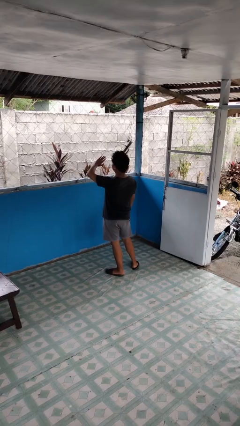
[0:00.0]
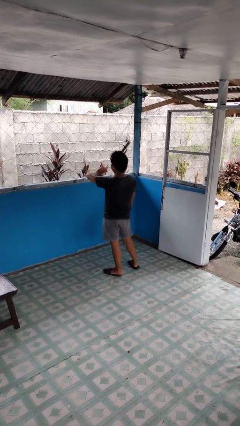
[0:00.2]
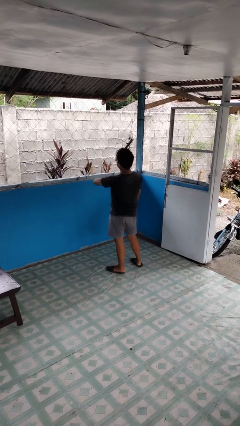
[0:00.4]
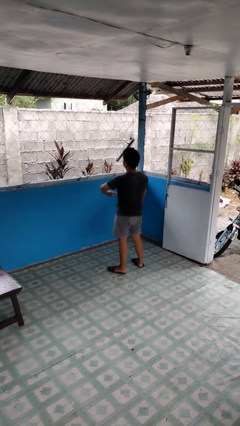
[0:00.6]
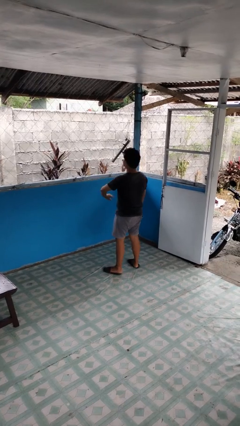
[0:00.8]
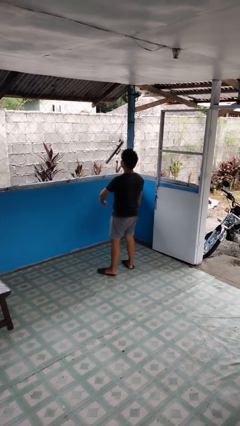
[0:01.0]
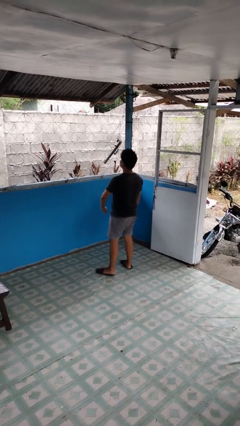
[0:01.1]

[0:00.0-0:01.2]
person gestures swipe down

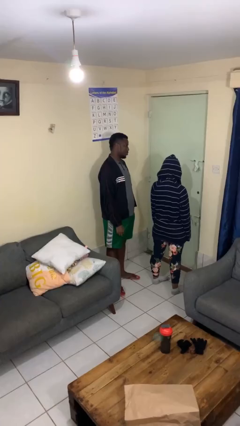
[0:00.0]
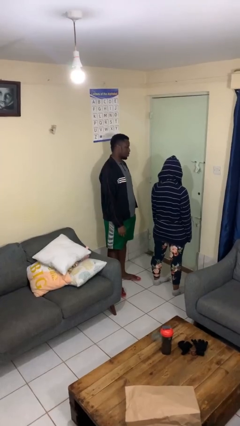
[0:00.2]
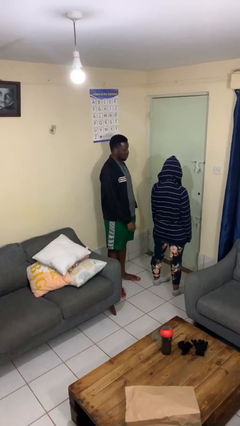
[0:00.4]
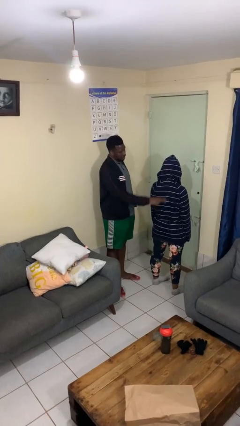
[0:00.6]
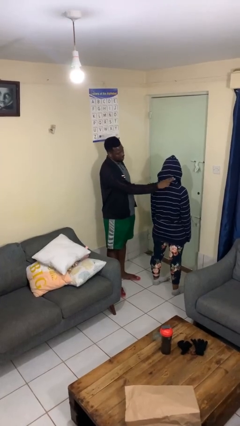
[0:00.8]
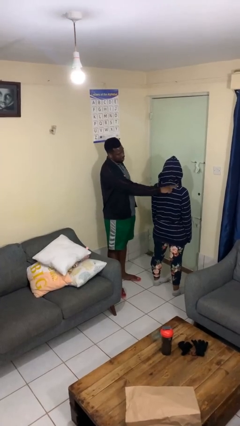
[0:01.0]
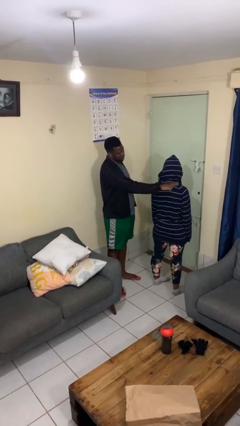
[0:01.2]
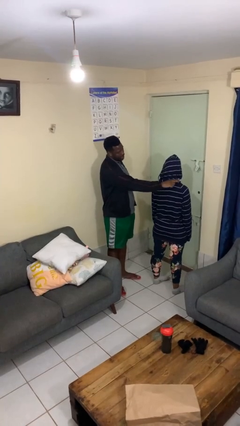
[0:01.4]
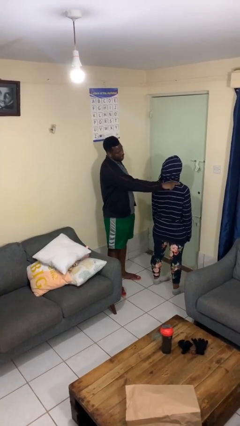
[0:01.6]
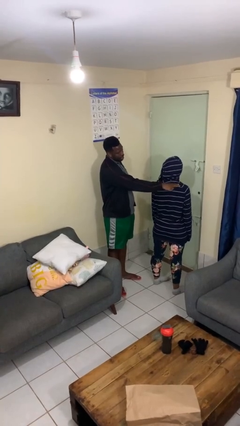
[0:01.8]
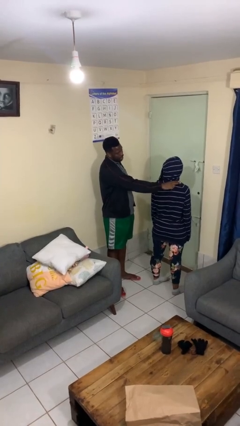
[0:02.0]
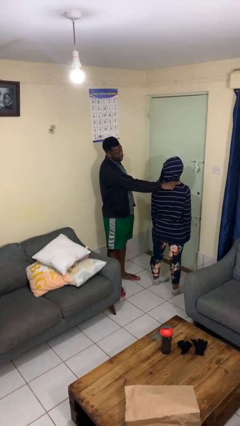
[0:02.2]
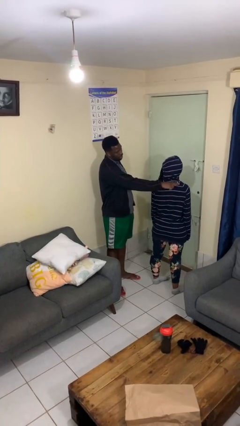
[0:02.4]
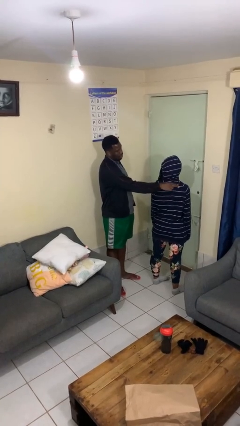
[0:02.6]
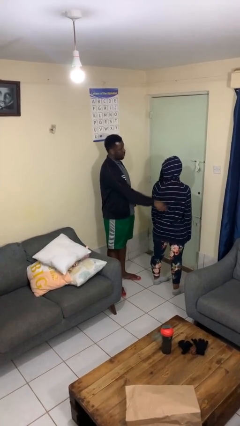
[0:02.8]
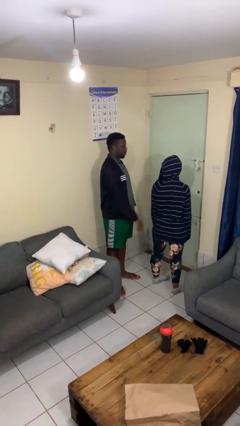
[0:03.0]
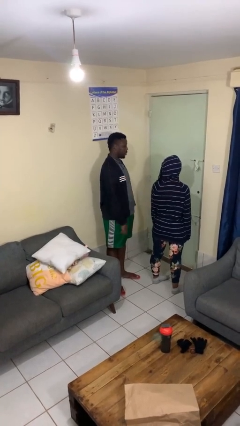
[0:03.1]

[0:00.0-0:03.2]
person touches back of person

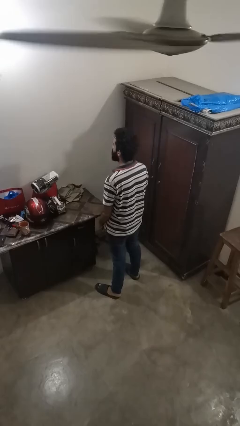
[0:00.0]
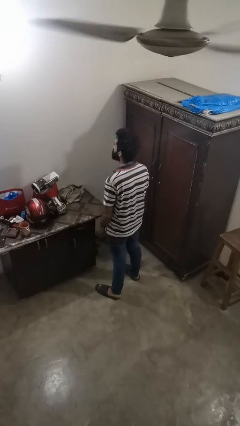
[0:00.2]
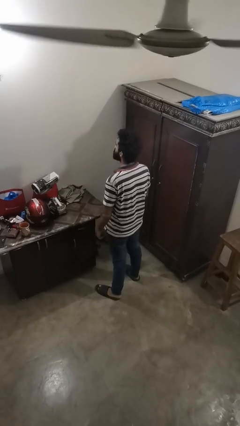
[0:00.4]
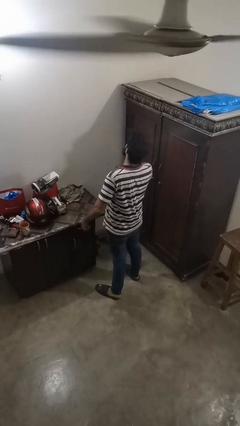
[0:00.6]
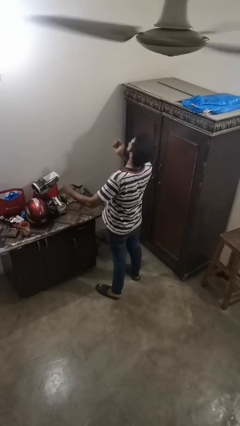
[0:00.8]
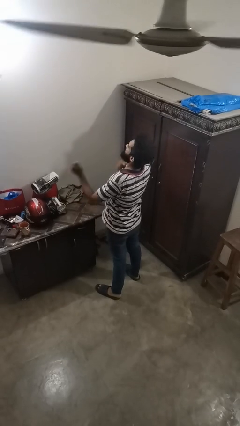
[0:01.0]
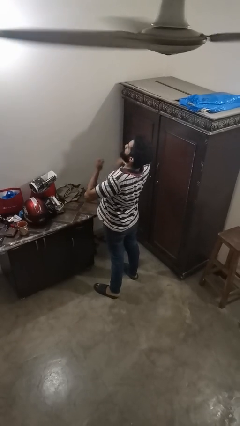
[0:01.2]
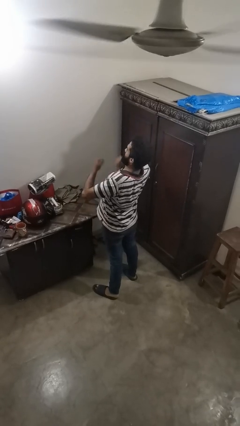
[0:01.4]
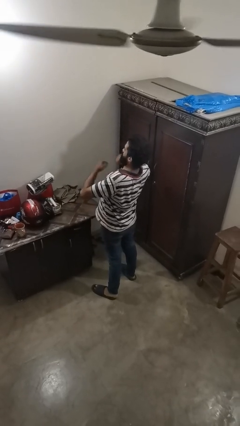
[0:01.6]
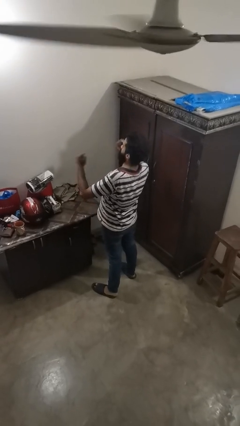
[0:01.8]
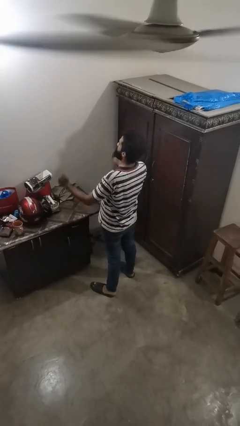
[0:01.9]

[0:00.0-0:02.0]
person drums on chest

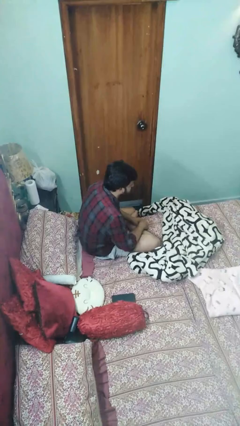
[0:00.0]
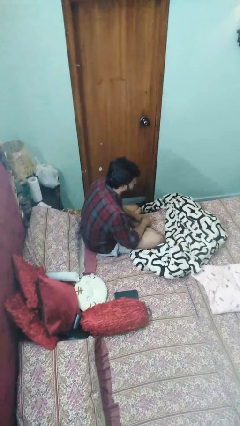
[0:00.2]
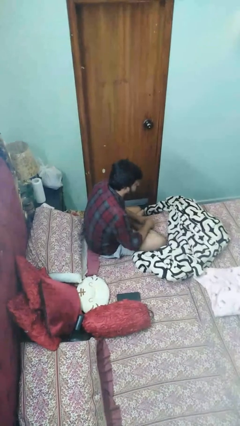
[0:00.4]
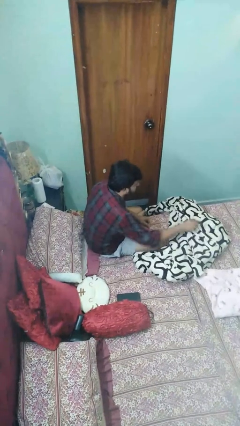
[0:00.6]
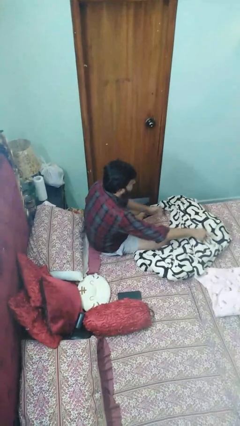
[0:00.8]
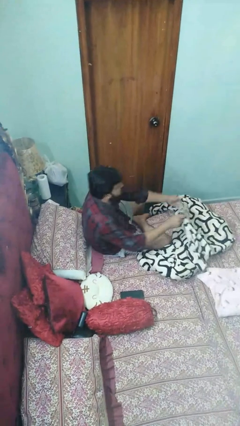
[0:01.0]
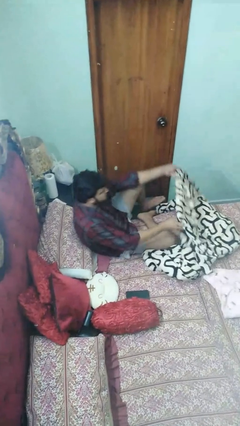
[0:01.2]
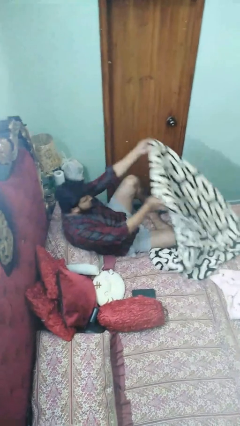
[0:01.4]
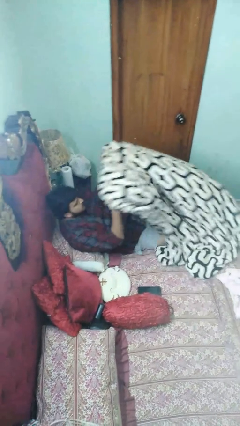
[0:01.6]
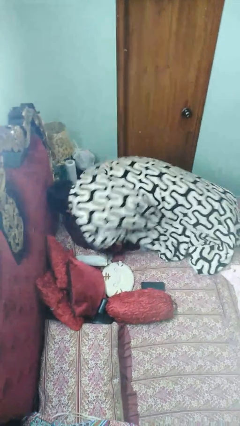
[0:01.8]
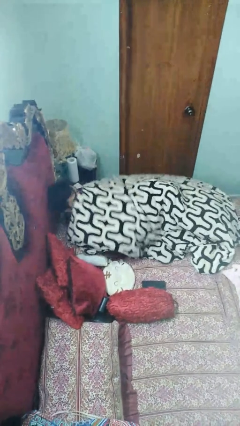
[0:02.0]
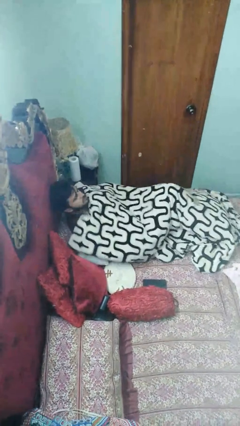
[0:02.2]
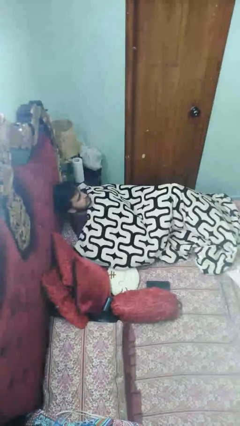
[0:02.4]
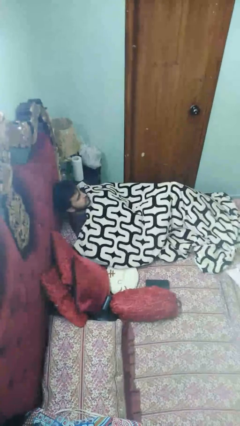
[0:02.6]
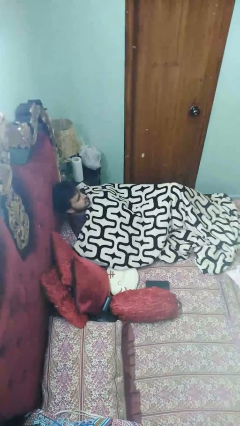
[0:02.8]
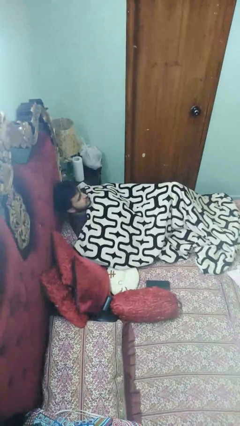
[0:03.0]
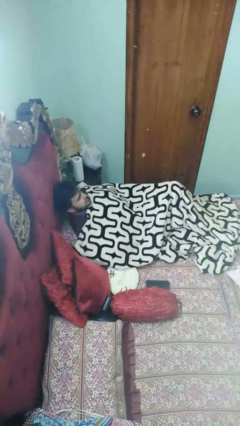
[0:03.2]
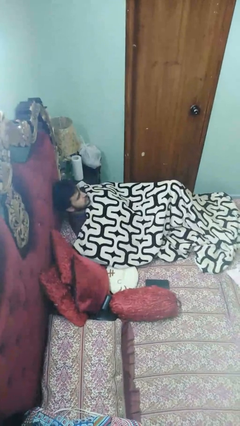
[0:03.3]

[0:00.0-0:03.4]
person covers with blanket

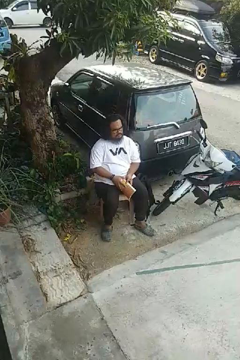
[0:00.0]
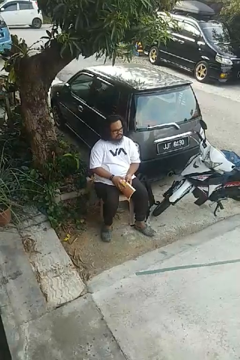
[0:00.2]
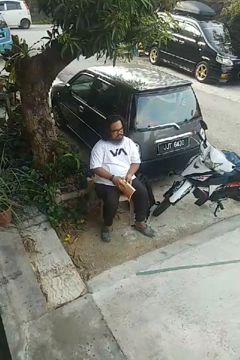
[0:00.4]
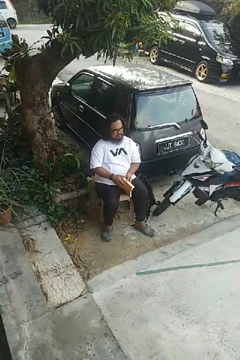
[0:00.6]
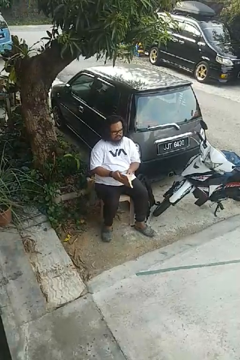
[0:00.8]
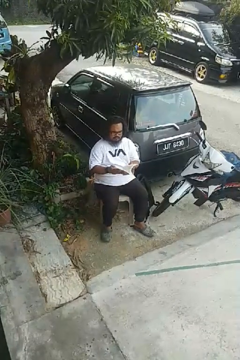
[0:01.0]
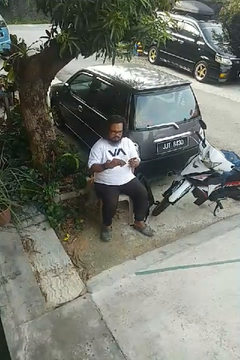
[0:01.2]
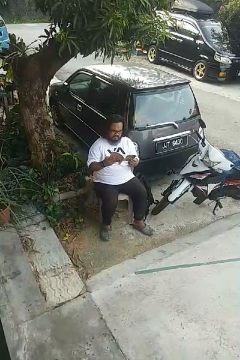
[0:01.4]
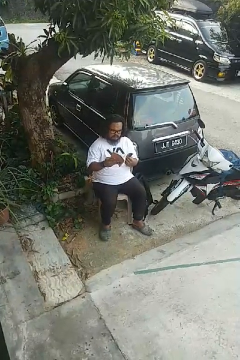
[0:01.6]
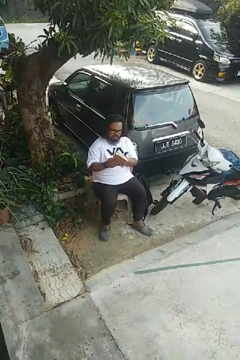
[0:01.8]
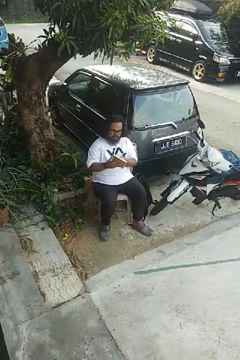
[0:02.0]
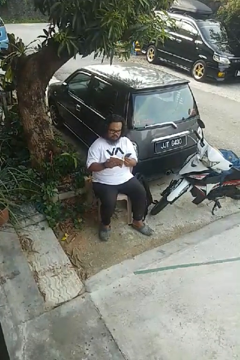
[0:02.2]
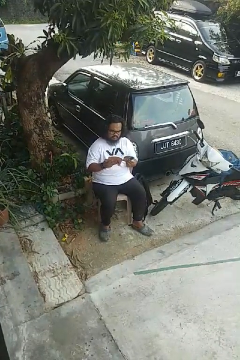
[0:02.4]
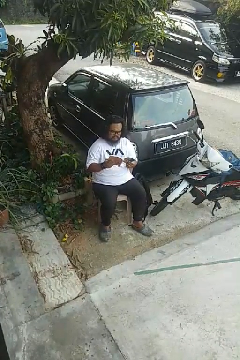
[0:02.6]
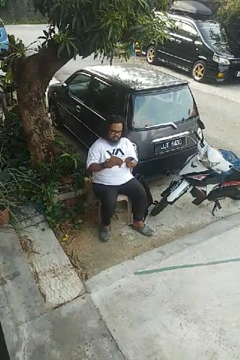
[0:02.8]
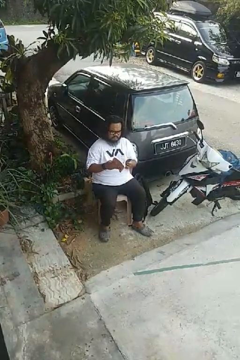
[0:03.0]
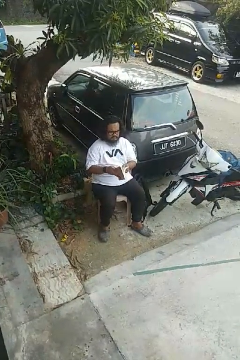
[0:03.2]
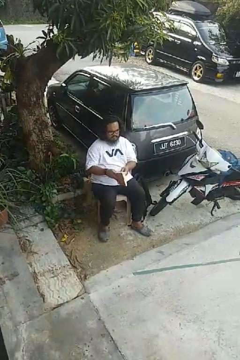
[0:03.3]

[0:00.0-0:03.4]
person reads book

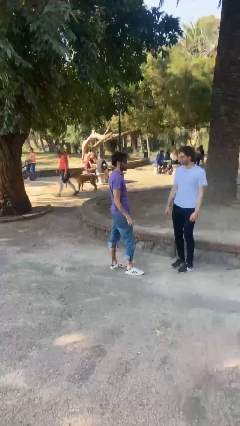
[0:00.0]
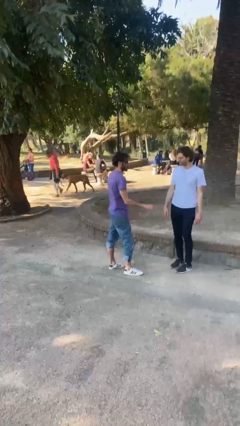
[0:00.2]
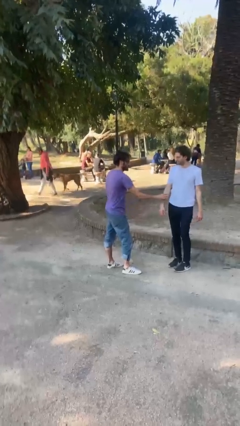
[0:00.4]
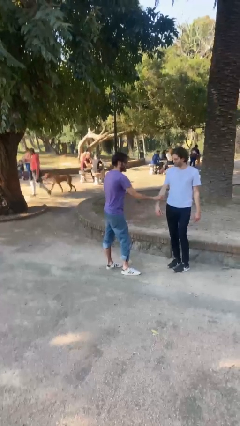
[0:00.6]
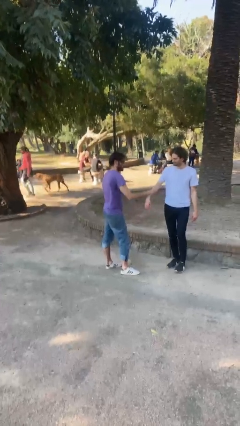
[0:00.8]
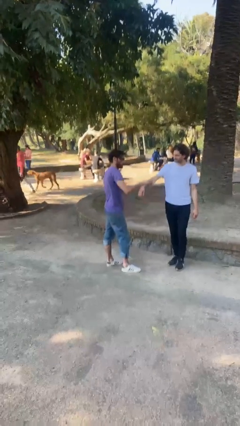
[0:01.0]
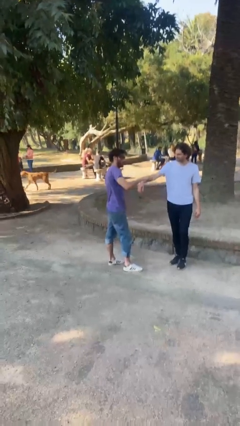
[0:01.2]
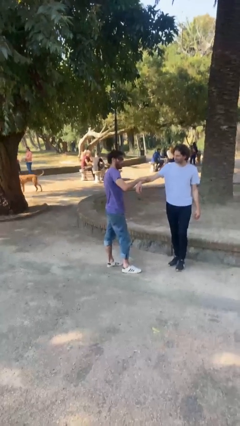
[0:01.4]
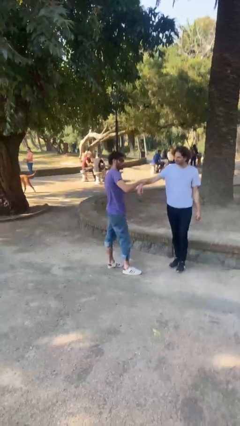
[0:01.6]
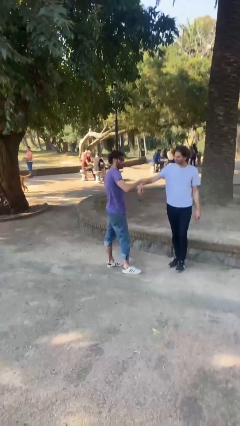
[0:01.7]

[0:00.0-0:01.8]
person grabs person by forearm

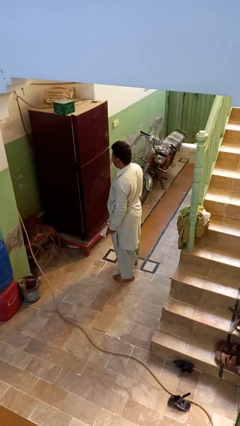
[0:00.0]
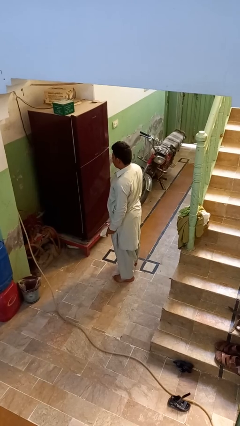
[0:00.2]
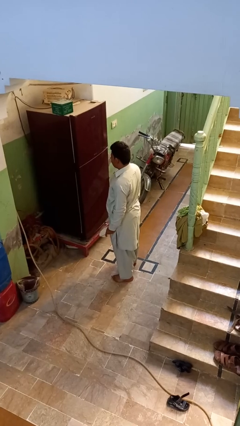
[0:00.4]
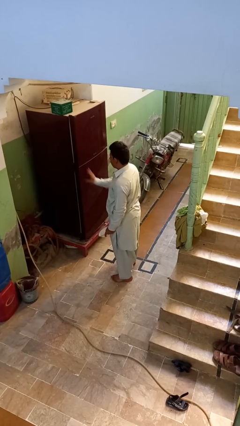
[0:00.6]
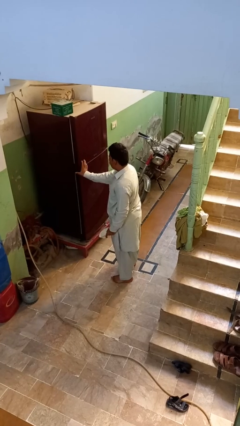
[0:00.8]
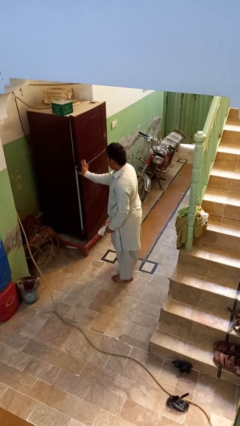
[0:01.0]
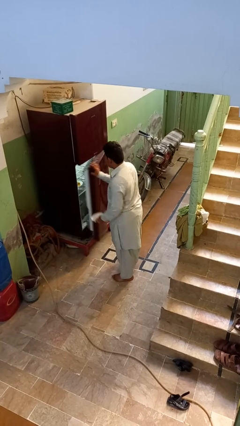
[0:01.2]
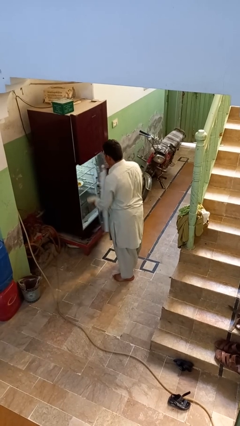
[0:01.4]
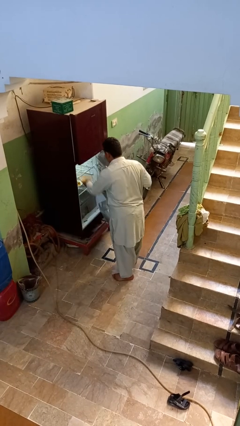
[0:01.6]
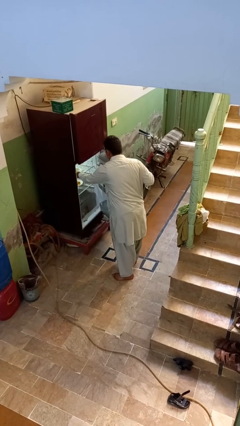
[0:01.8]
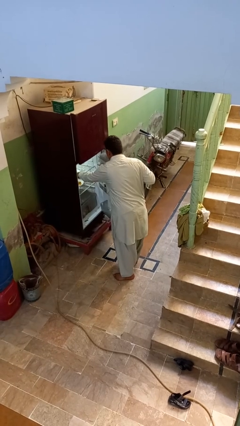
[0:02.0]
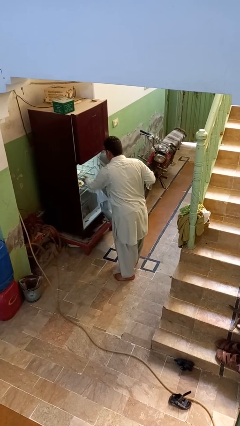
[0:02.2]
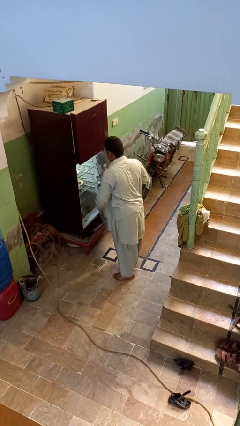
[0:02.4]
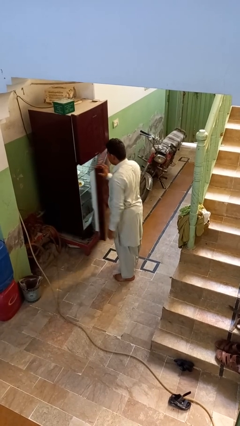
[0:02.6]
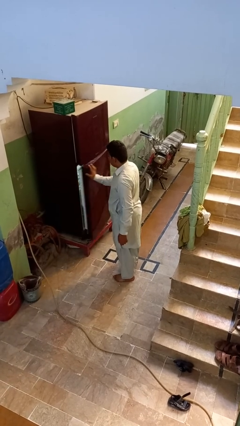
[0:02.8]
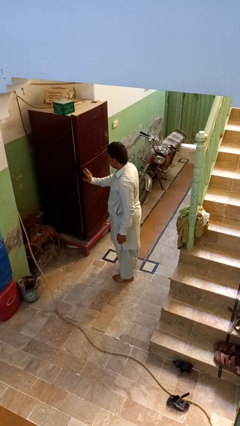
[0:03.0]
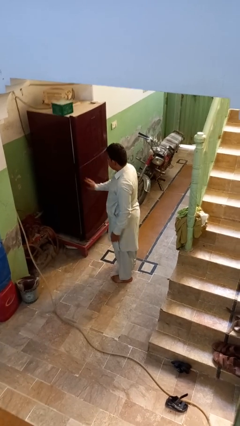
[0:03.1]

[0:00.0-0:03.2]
person puts object into refrigerator
